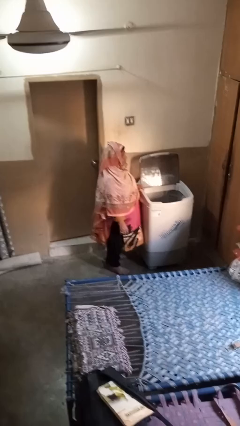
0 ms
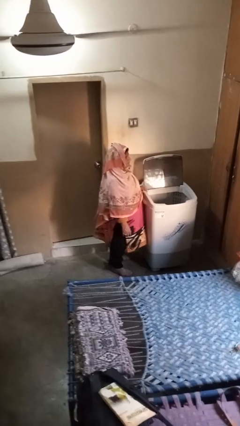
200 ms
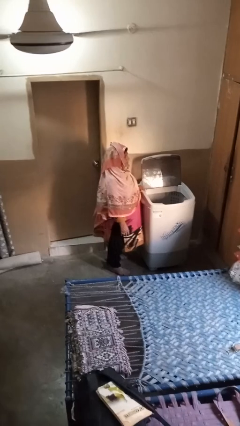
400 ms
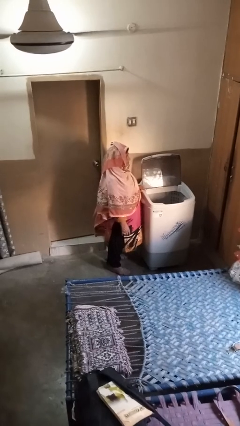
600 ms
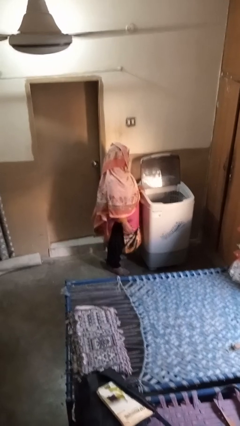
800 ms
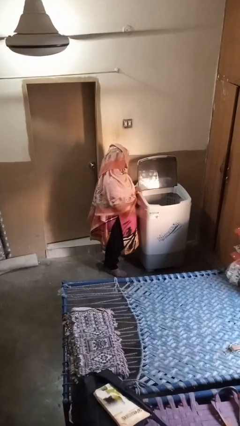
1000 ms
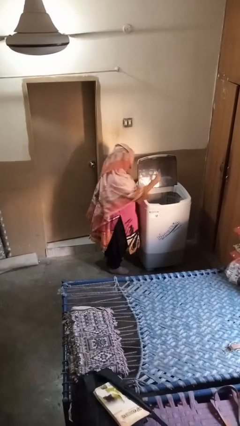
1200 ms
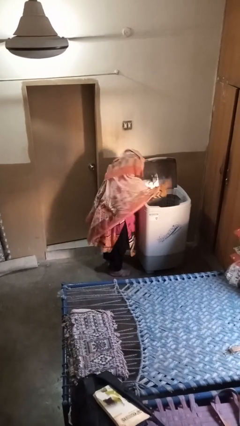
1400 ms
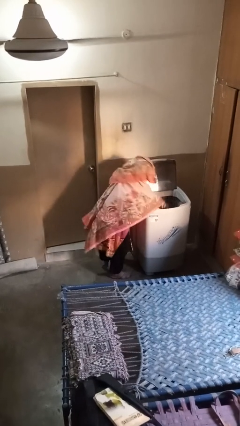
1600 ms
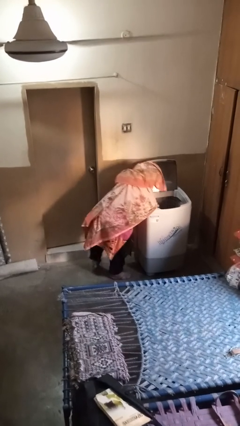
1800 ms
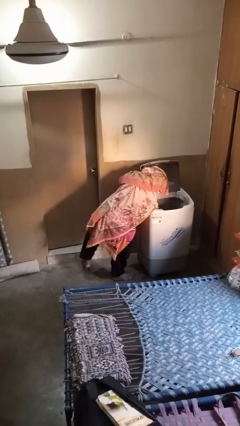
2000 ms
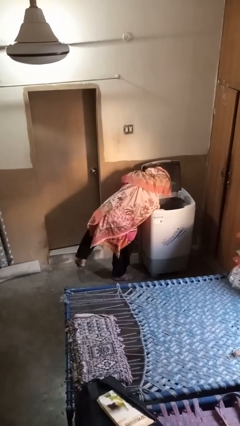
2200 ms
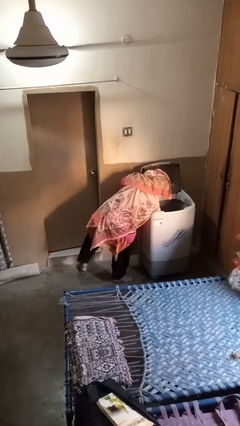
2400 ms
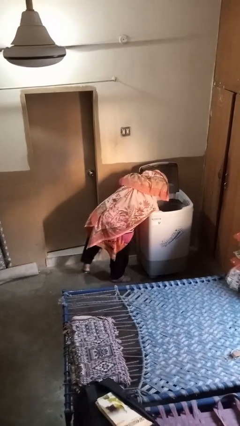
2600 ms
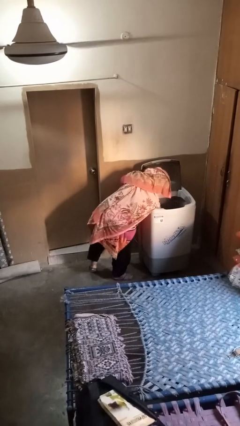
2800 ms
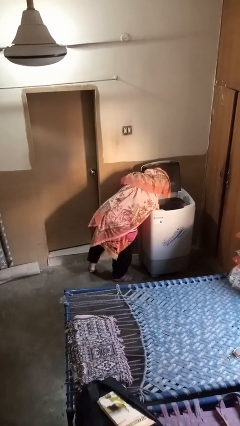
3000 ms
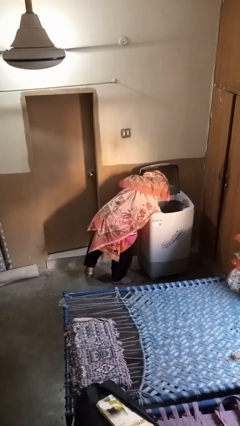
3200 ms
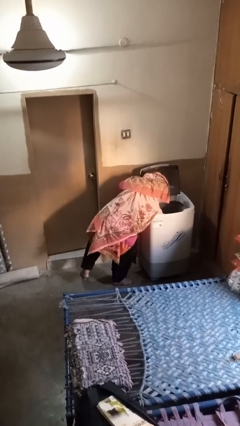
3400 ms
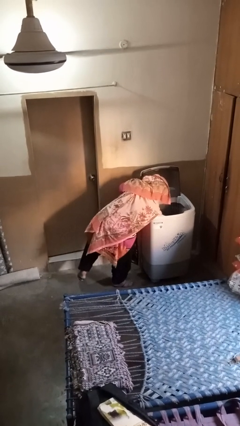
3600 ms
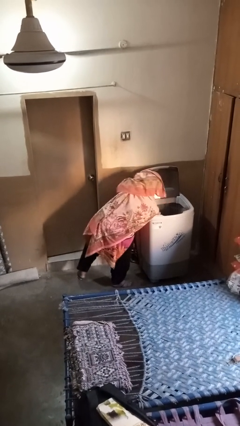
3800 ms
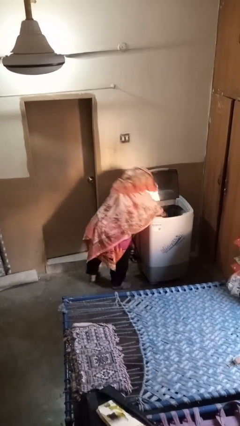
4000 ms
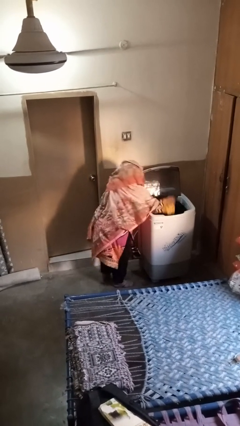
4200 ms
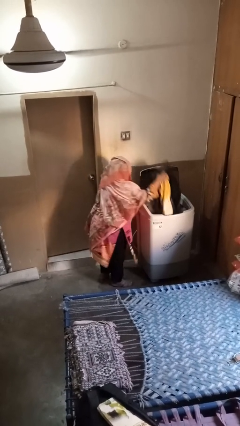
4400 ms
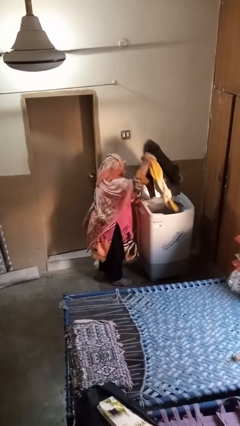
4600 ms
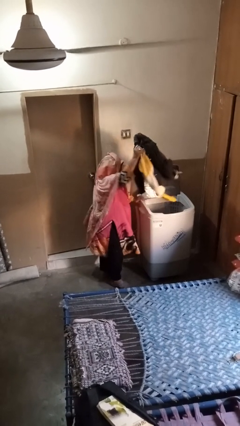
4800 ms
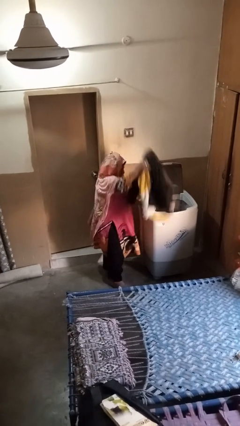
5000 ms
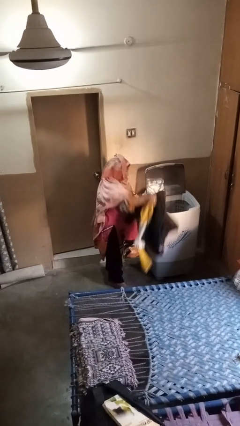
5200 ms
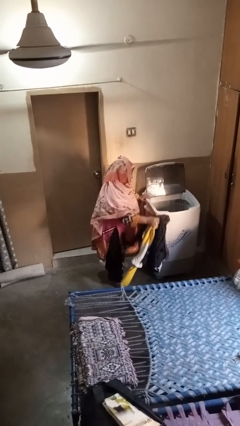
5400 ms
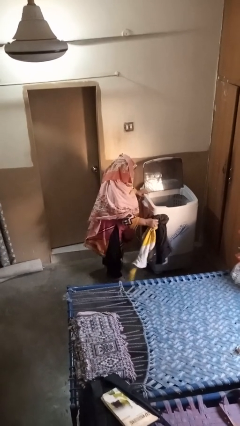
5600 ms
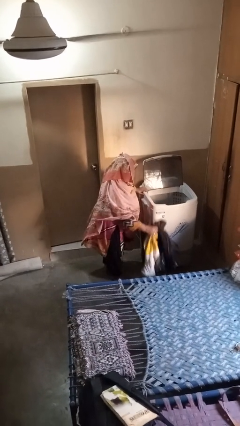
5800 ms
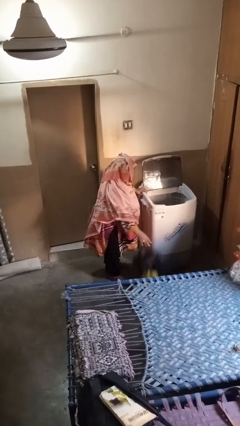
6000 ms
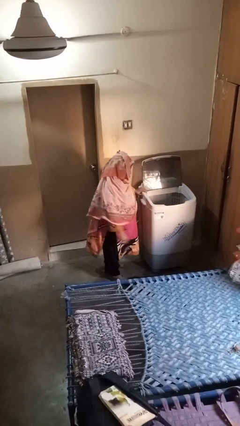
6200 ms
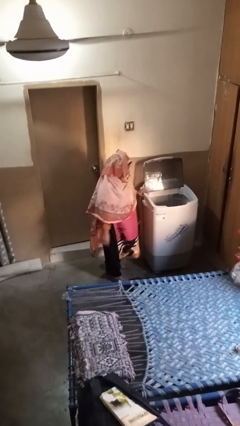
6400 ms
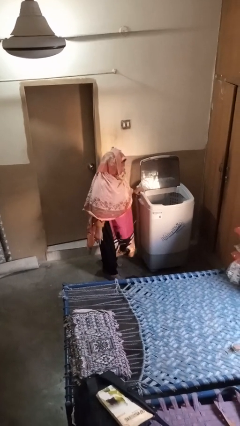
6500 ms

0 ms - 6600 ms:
person unloads clotheswasher

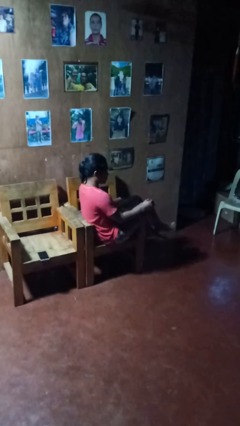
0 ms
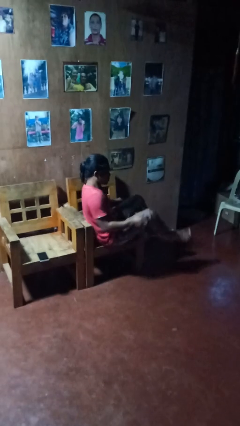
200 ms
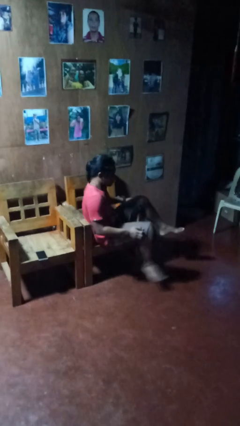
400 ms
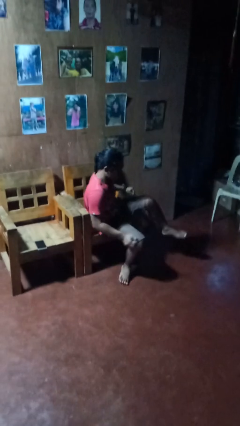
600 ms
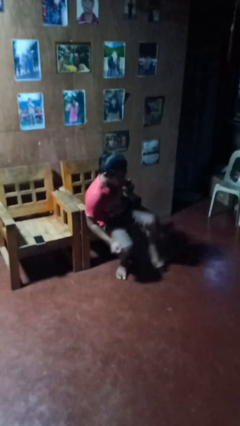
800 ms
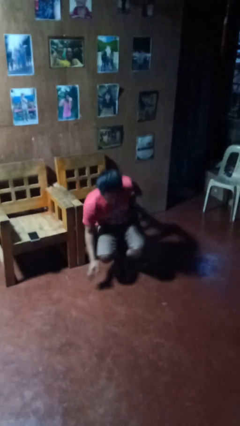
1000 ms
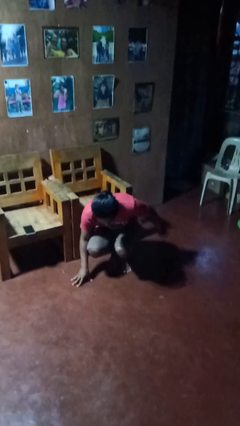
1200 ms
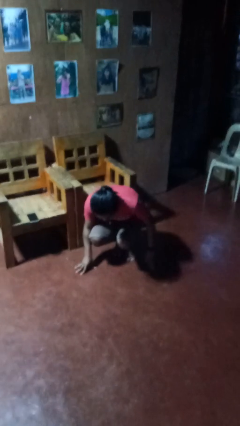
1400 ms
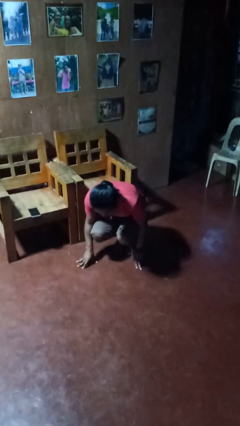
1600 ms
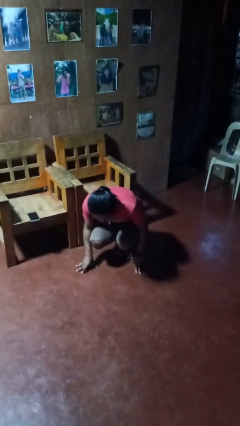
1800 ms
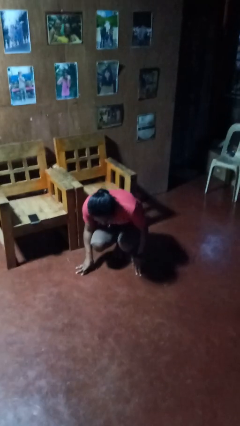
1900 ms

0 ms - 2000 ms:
person falls from chair

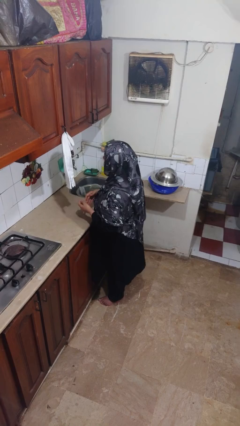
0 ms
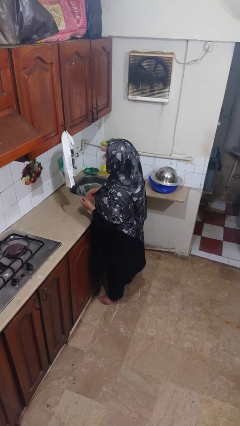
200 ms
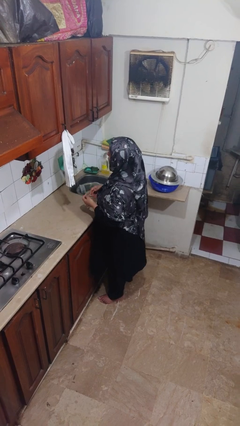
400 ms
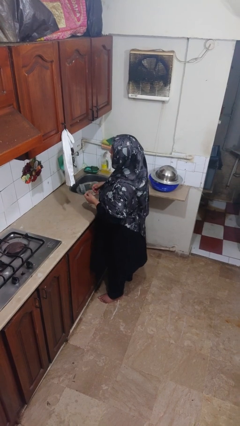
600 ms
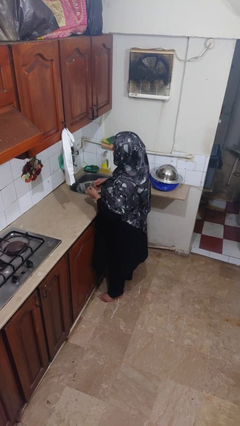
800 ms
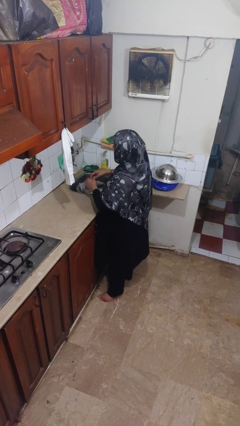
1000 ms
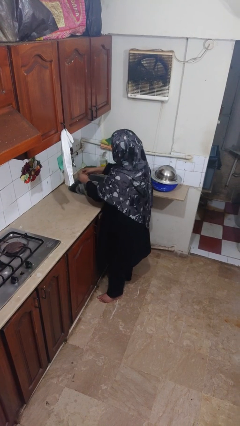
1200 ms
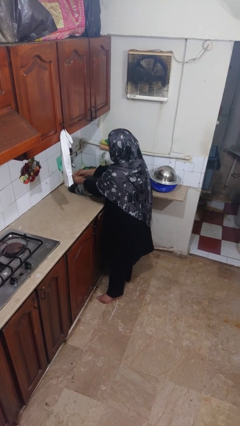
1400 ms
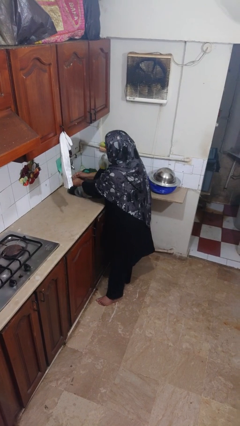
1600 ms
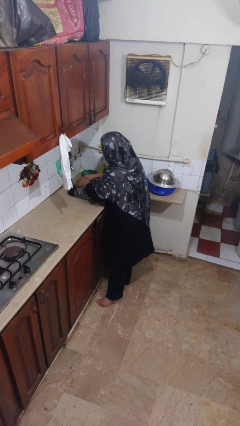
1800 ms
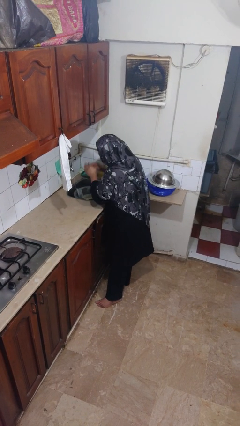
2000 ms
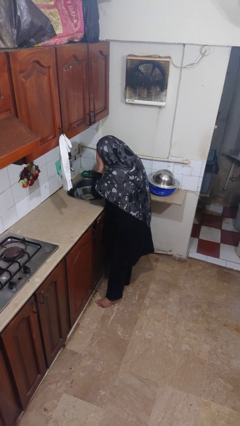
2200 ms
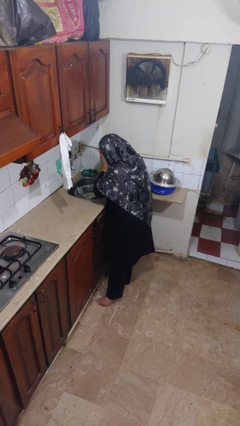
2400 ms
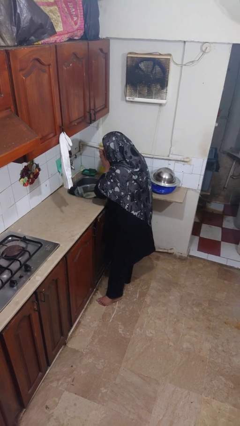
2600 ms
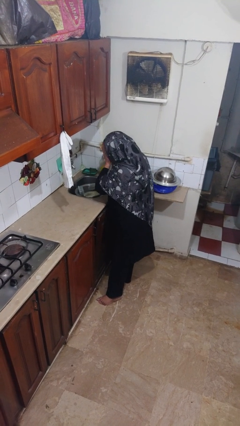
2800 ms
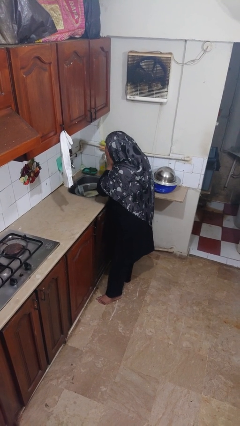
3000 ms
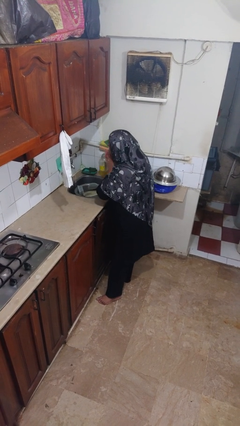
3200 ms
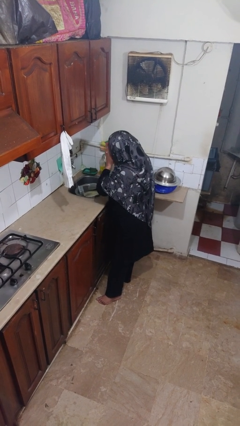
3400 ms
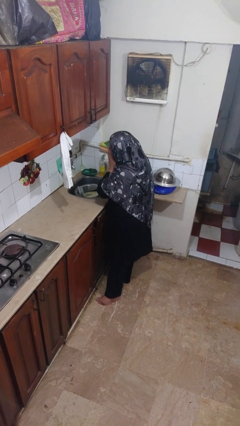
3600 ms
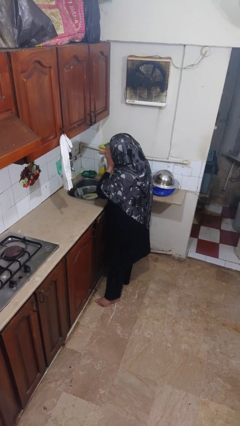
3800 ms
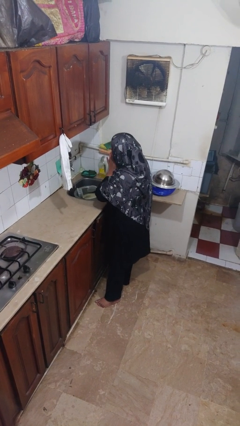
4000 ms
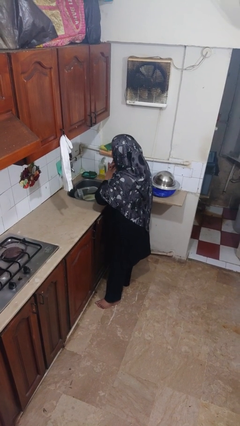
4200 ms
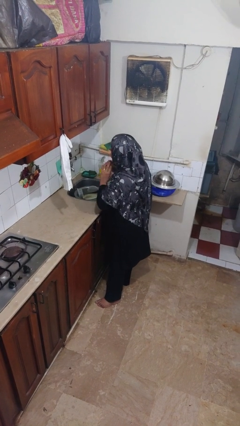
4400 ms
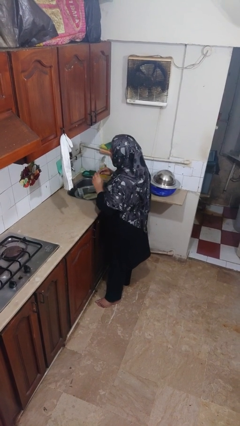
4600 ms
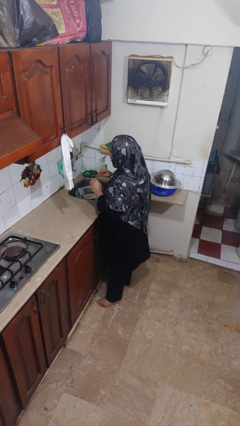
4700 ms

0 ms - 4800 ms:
person washes face

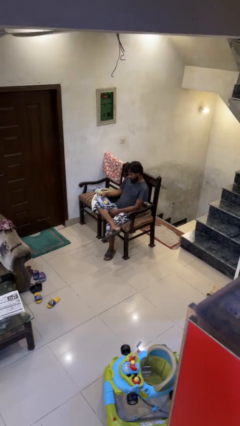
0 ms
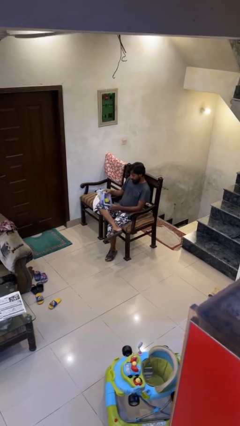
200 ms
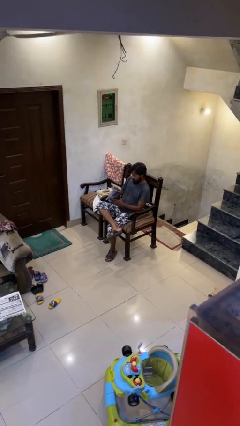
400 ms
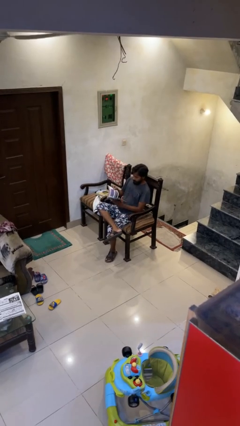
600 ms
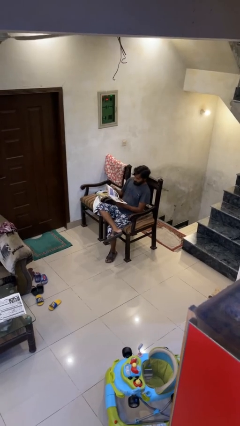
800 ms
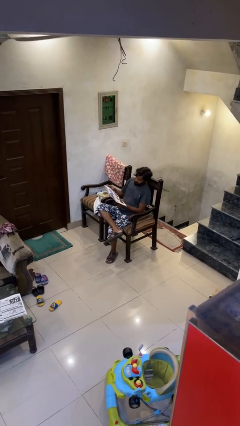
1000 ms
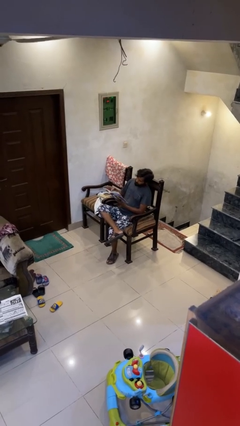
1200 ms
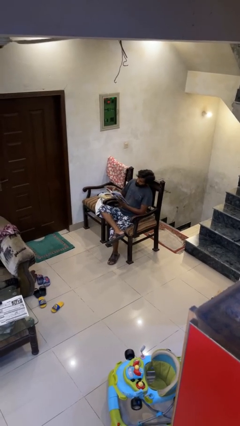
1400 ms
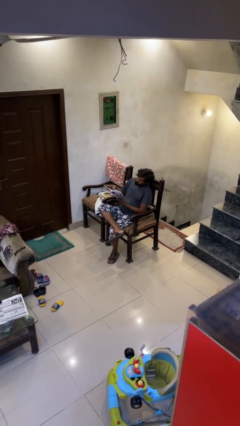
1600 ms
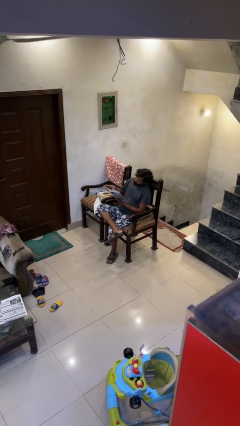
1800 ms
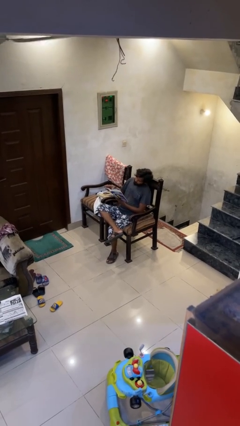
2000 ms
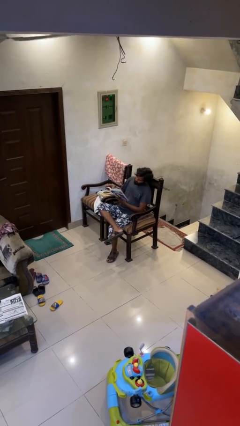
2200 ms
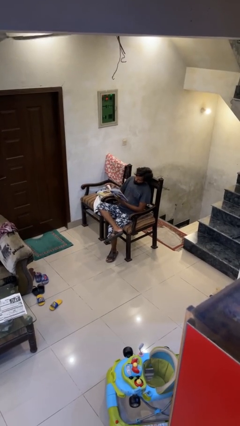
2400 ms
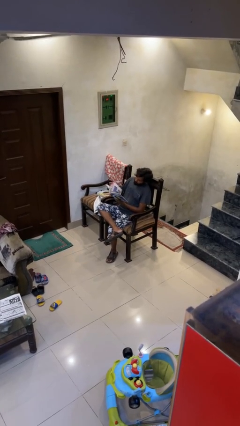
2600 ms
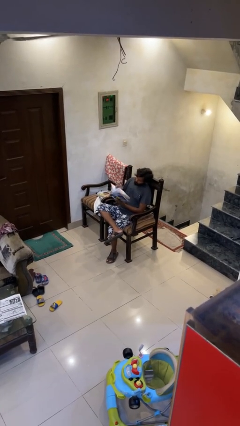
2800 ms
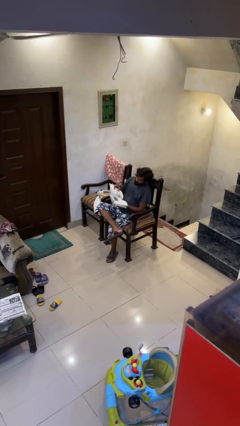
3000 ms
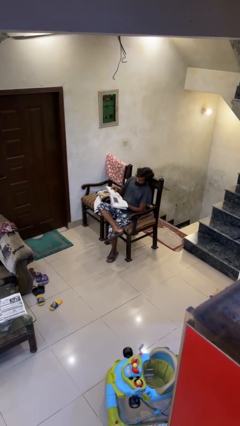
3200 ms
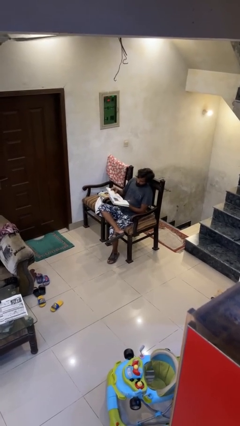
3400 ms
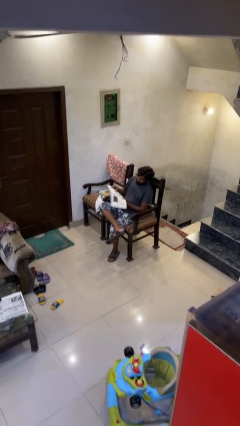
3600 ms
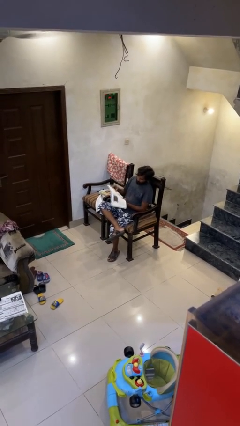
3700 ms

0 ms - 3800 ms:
person reads book

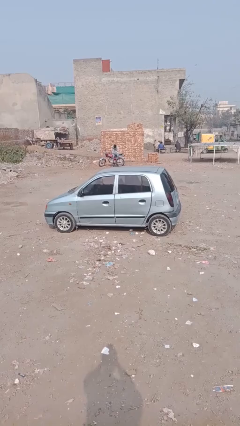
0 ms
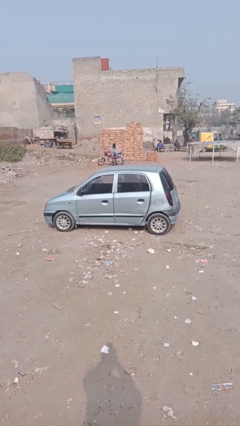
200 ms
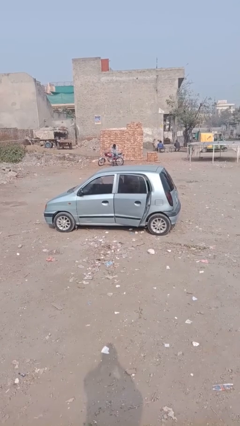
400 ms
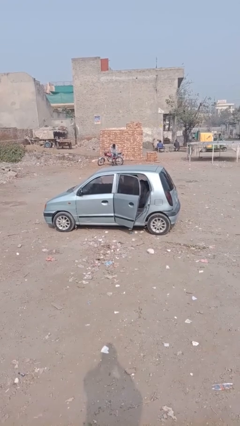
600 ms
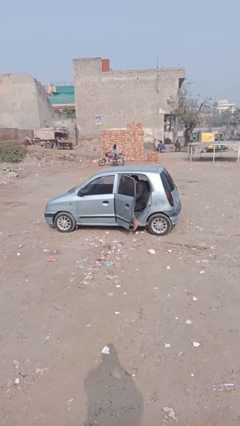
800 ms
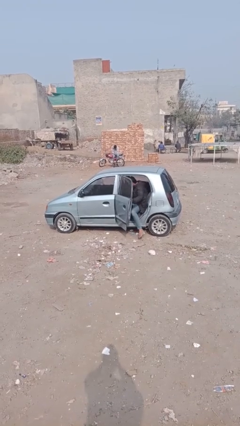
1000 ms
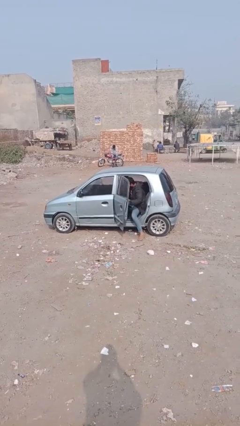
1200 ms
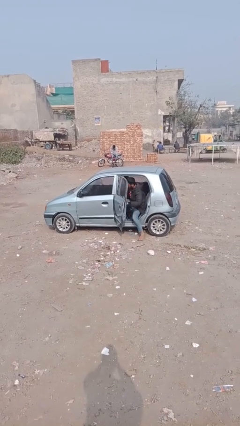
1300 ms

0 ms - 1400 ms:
car drops off person
